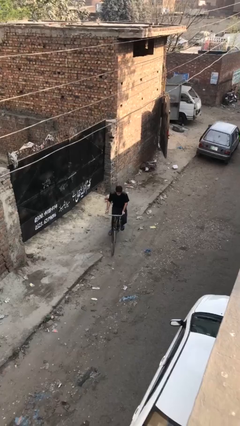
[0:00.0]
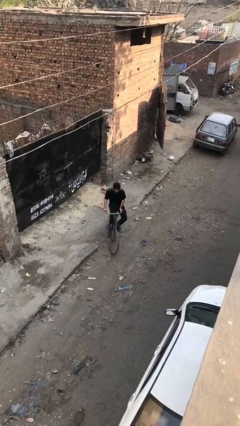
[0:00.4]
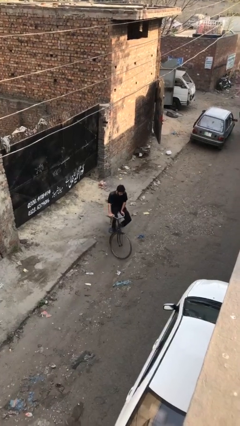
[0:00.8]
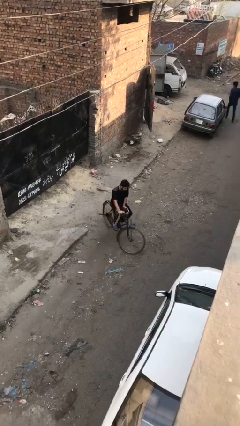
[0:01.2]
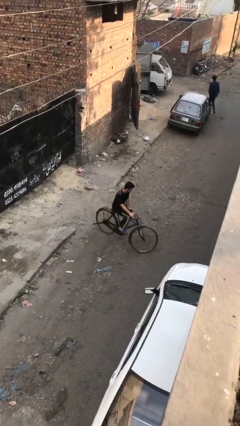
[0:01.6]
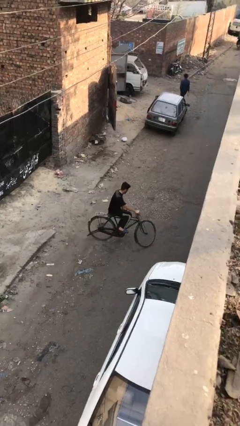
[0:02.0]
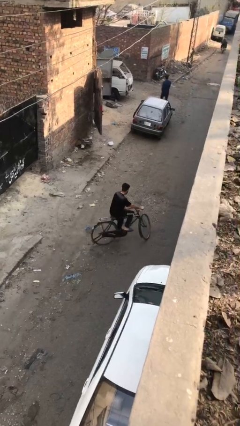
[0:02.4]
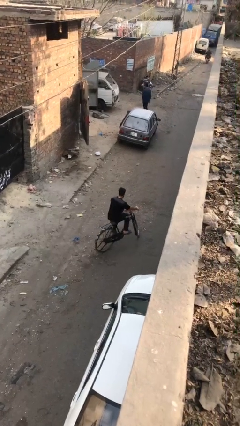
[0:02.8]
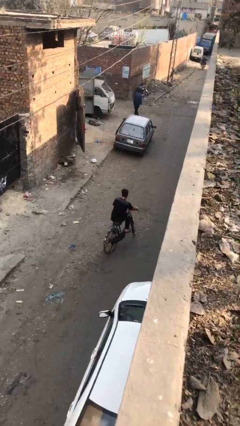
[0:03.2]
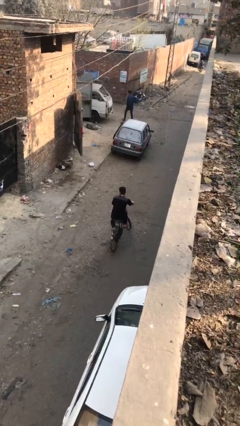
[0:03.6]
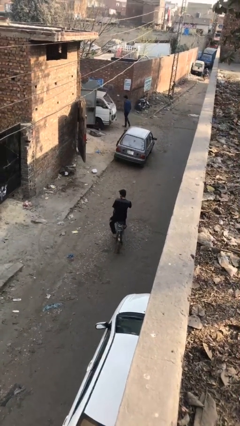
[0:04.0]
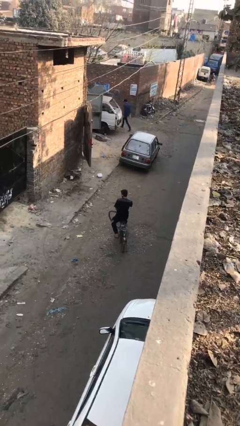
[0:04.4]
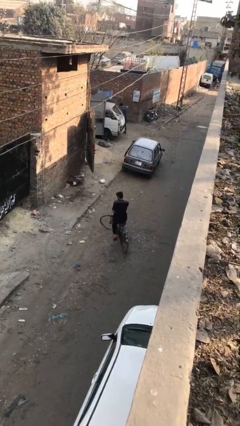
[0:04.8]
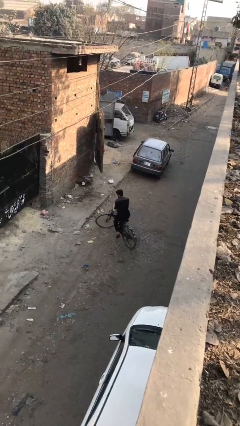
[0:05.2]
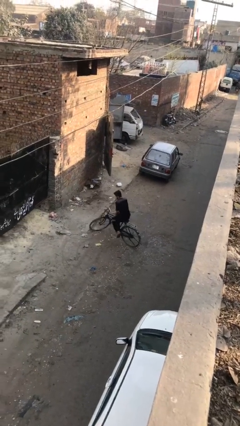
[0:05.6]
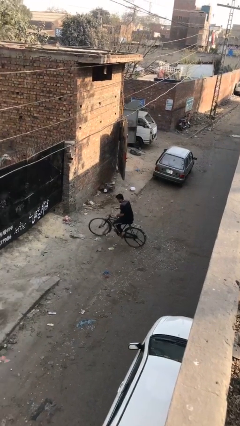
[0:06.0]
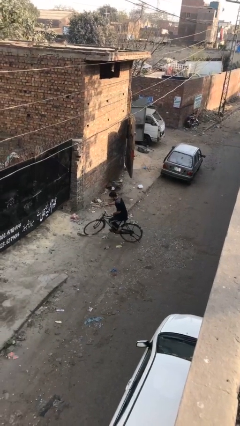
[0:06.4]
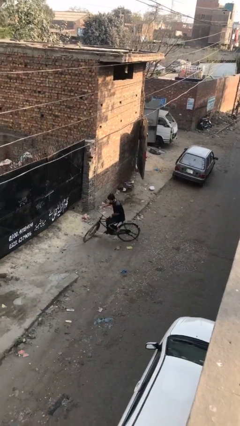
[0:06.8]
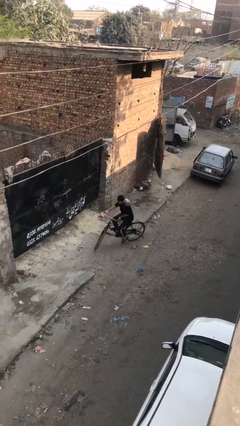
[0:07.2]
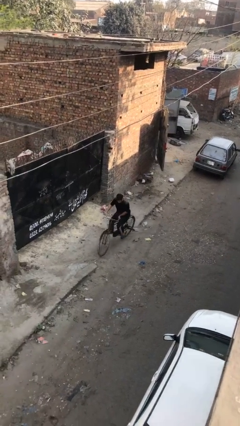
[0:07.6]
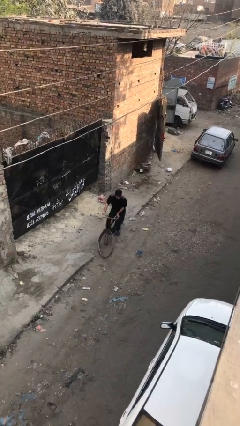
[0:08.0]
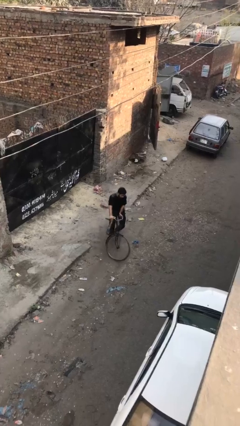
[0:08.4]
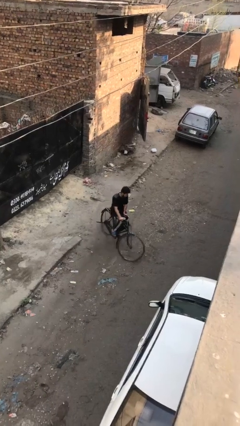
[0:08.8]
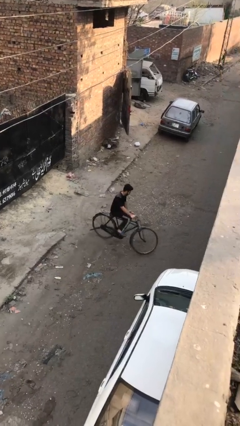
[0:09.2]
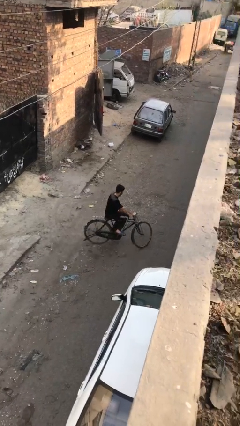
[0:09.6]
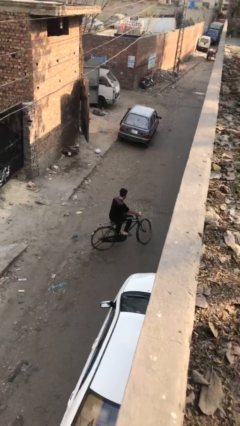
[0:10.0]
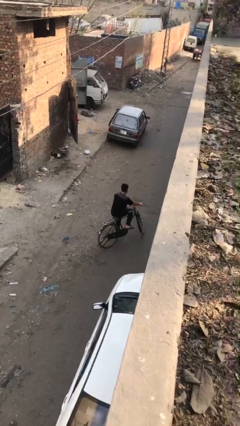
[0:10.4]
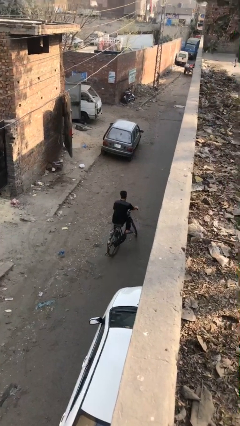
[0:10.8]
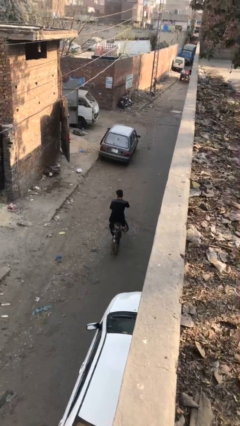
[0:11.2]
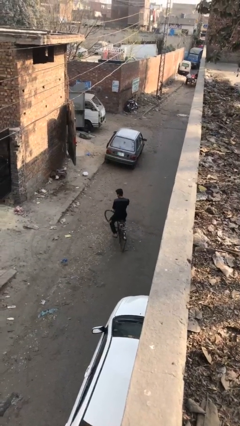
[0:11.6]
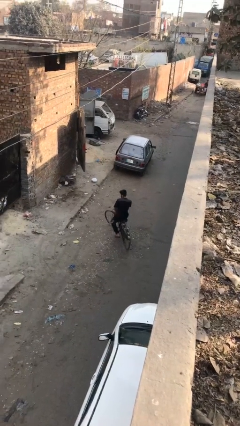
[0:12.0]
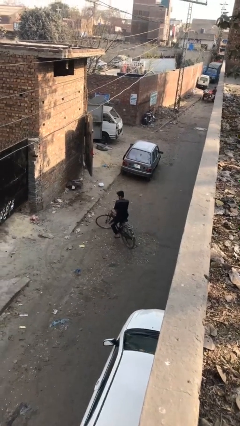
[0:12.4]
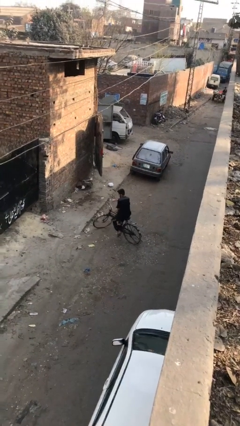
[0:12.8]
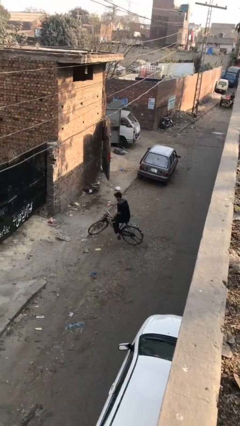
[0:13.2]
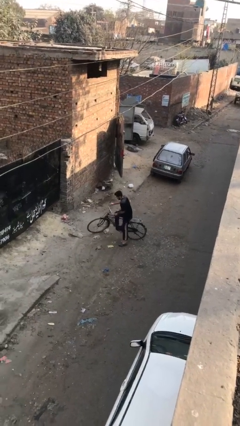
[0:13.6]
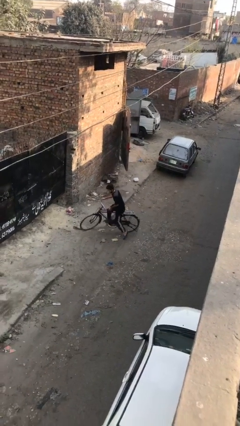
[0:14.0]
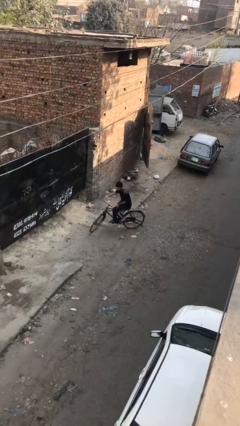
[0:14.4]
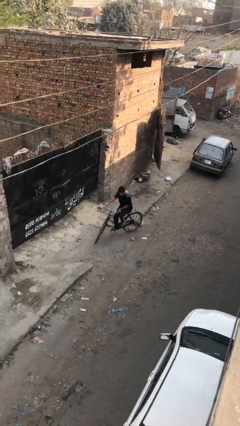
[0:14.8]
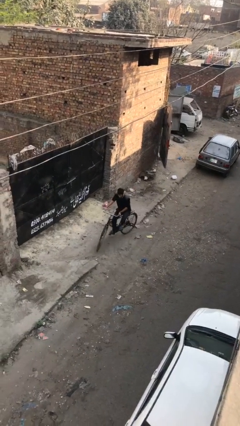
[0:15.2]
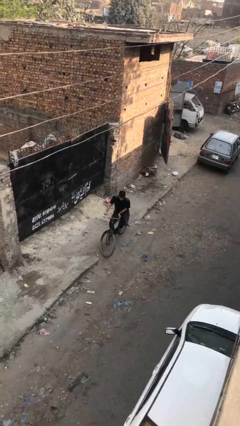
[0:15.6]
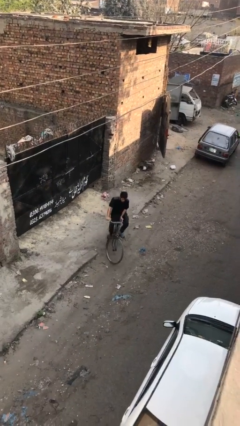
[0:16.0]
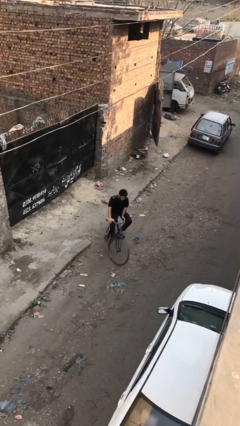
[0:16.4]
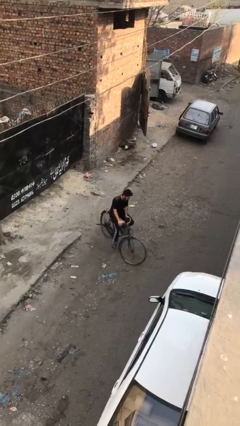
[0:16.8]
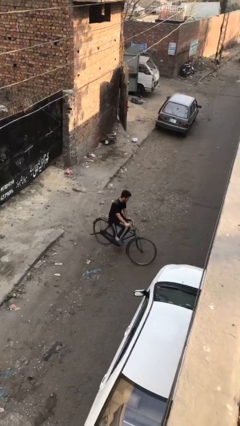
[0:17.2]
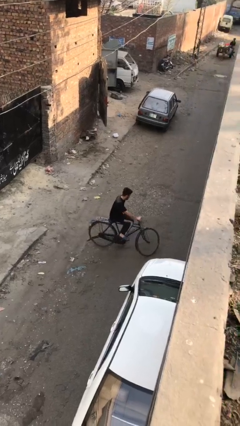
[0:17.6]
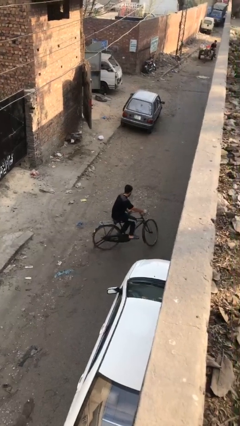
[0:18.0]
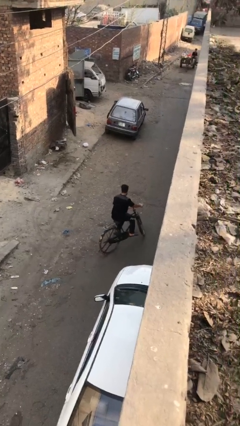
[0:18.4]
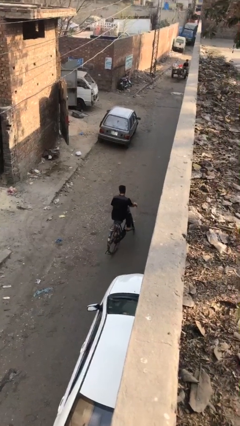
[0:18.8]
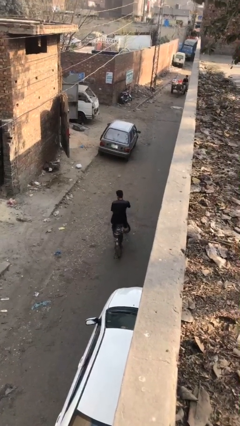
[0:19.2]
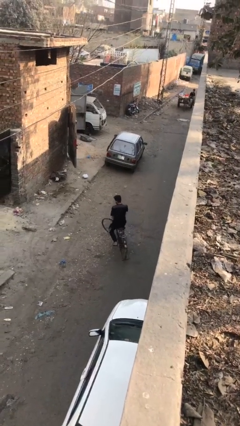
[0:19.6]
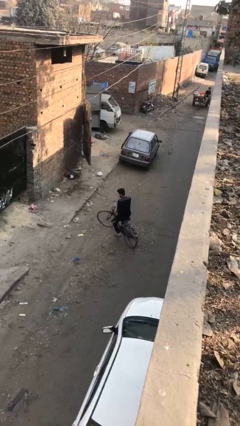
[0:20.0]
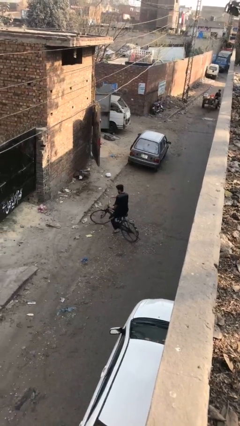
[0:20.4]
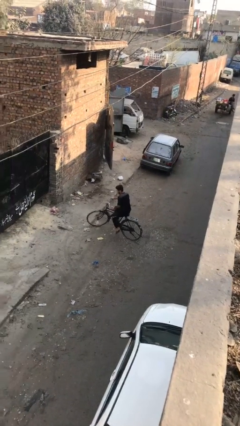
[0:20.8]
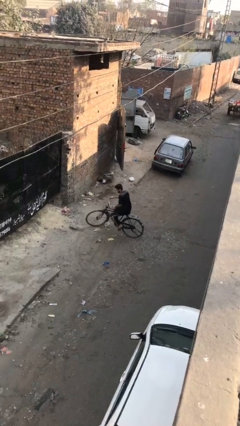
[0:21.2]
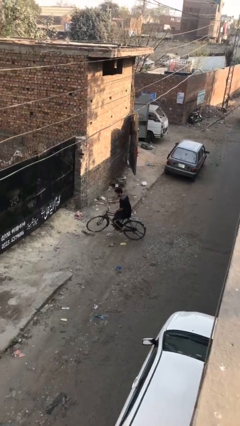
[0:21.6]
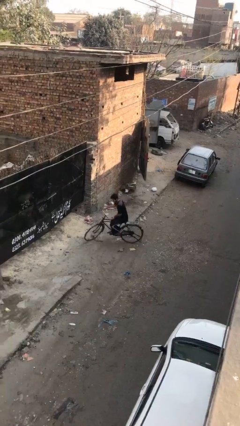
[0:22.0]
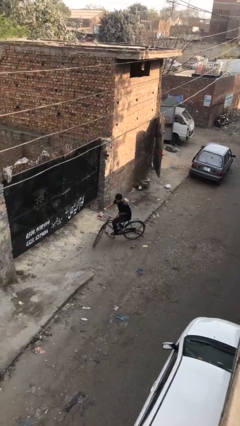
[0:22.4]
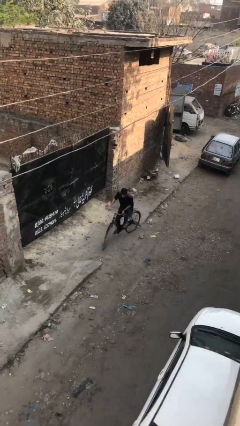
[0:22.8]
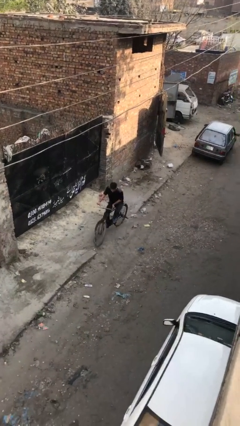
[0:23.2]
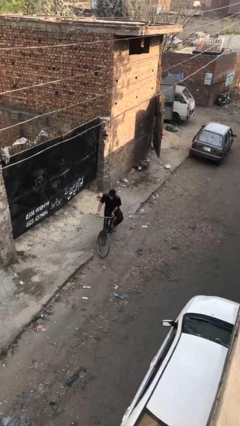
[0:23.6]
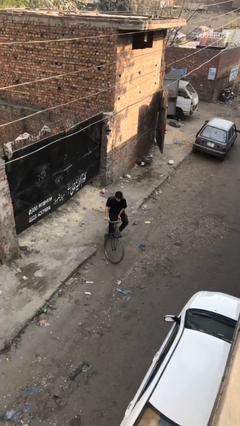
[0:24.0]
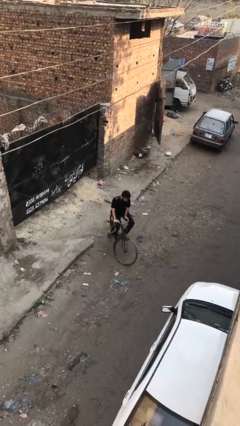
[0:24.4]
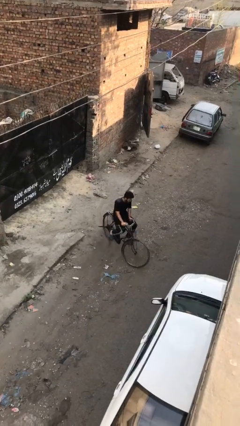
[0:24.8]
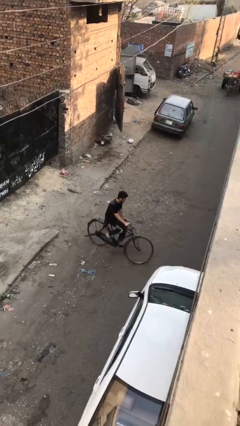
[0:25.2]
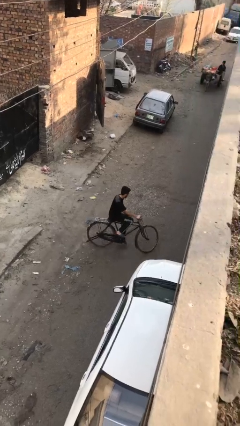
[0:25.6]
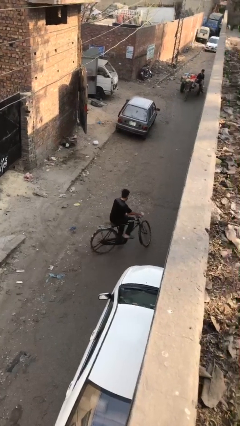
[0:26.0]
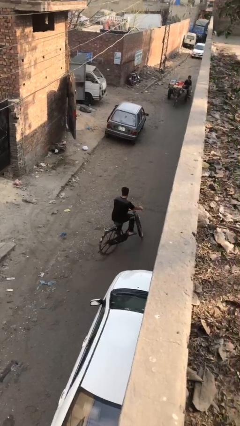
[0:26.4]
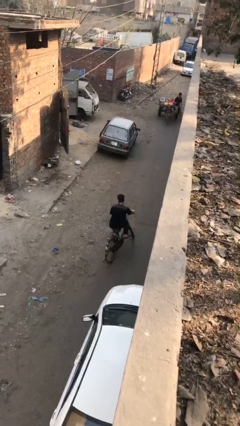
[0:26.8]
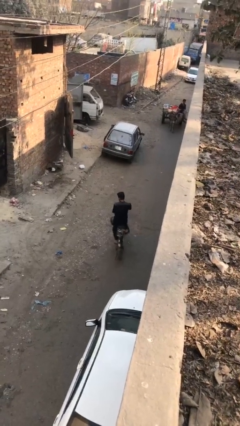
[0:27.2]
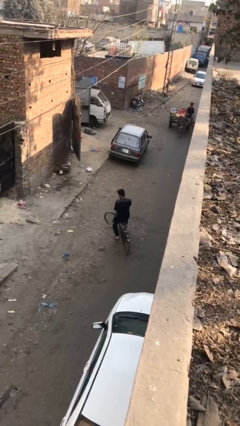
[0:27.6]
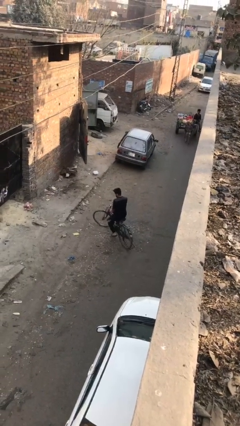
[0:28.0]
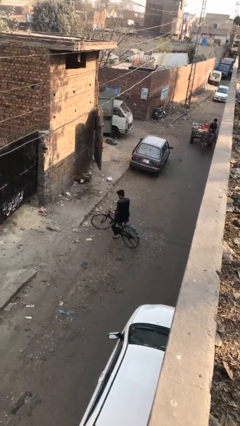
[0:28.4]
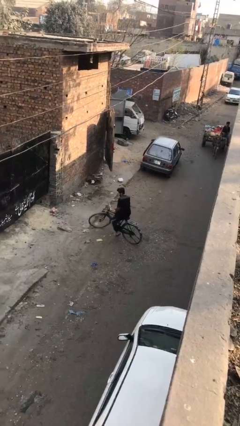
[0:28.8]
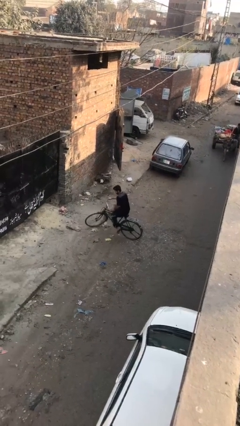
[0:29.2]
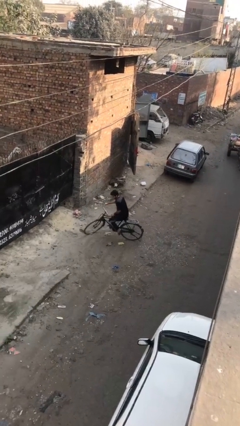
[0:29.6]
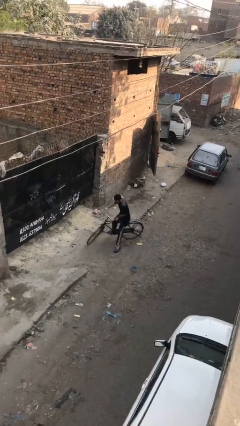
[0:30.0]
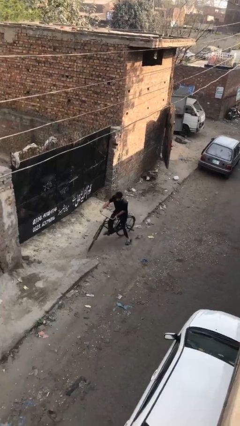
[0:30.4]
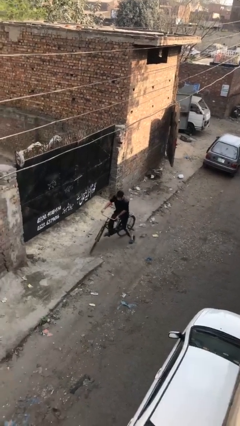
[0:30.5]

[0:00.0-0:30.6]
person rides bicycle

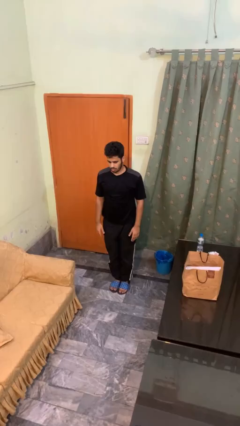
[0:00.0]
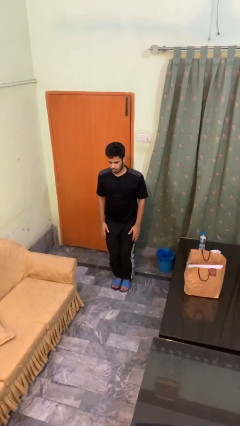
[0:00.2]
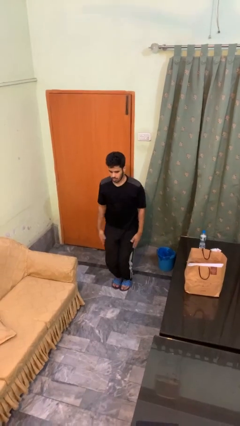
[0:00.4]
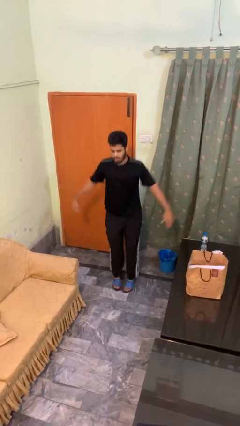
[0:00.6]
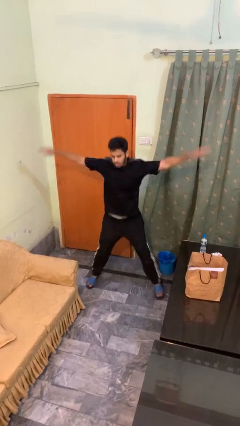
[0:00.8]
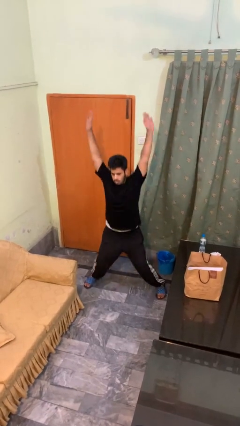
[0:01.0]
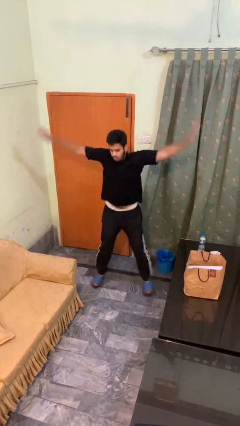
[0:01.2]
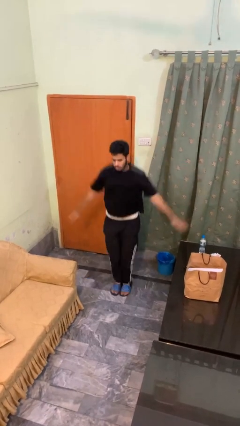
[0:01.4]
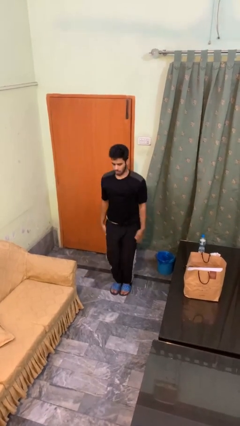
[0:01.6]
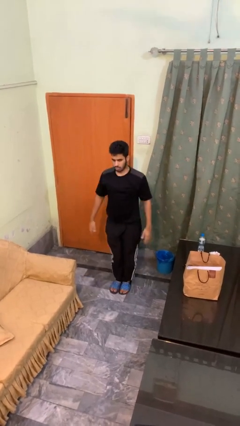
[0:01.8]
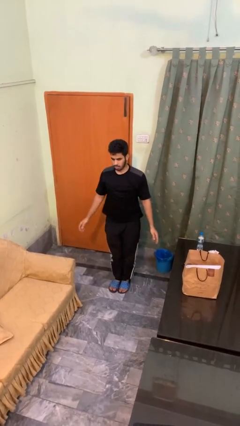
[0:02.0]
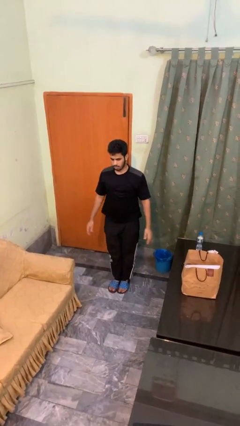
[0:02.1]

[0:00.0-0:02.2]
person exercises with jumping jacks

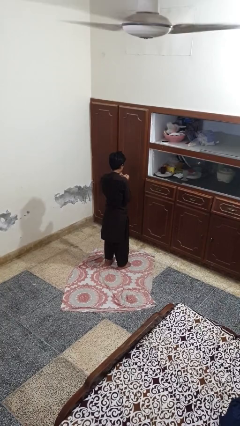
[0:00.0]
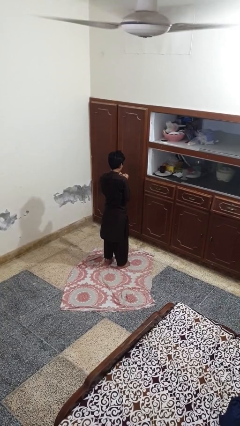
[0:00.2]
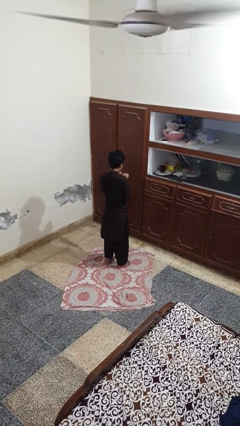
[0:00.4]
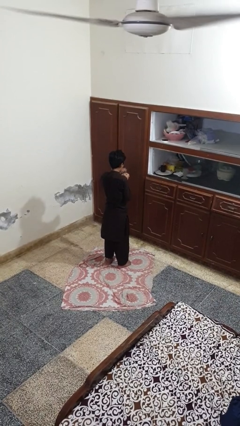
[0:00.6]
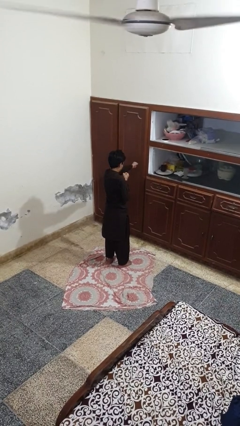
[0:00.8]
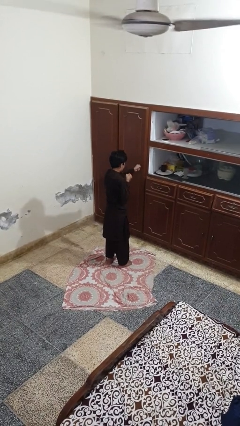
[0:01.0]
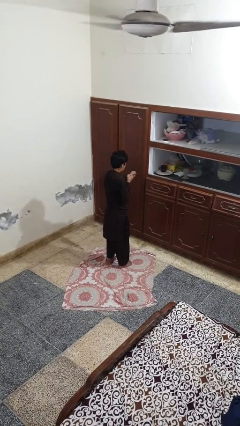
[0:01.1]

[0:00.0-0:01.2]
person punches
